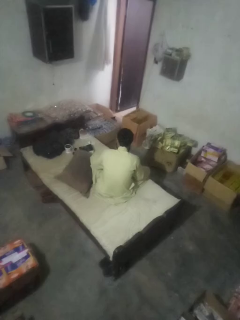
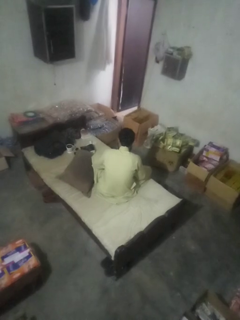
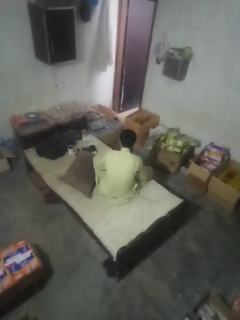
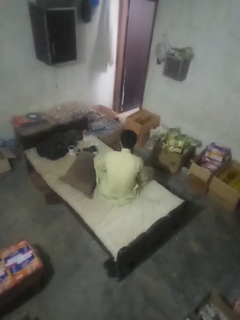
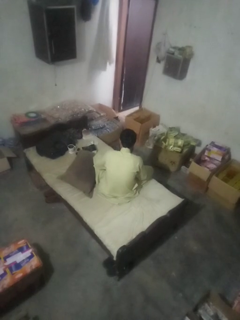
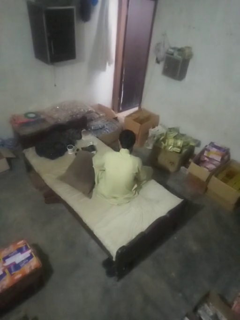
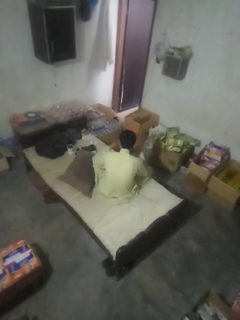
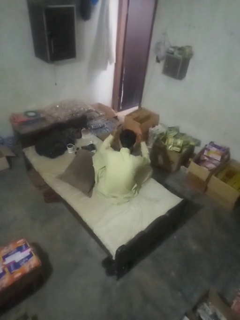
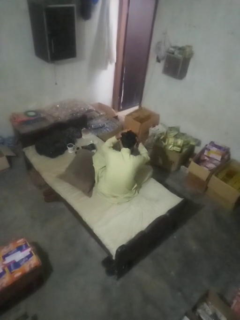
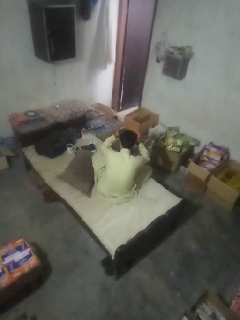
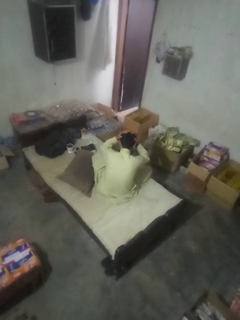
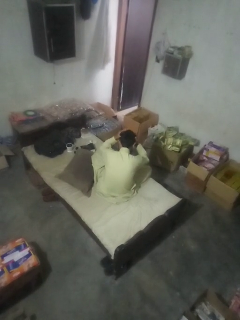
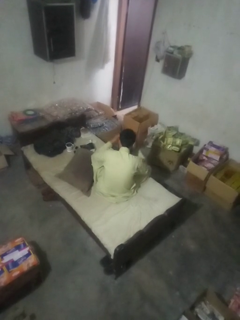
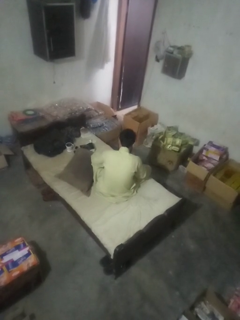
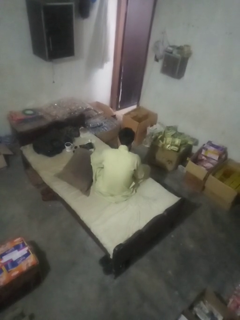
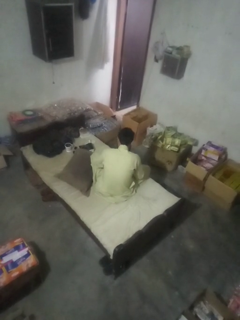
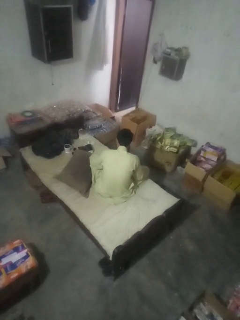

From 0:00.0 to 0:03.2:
person pats head

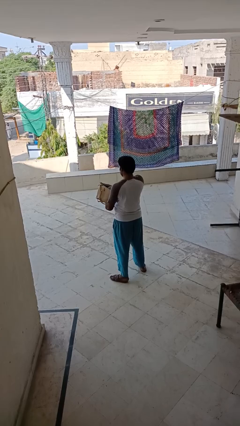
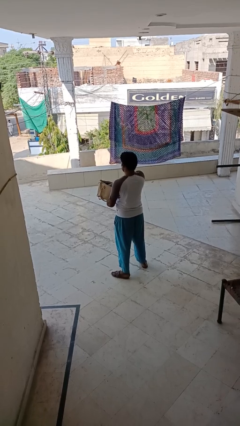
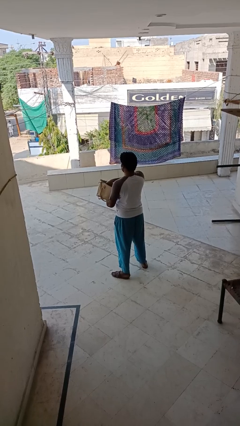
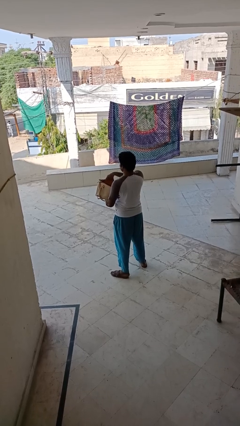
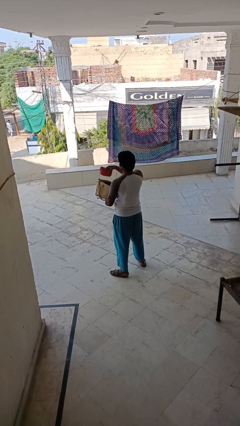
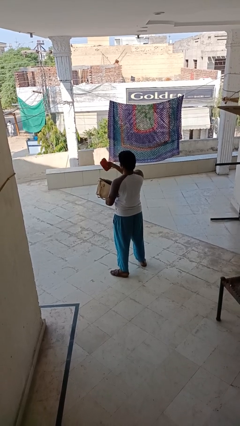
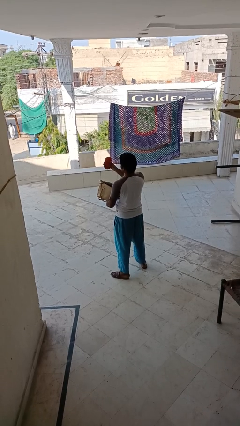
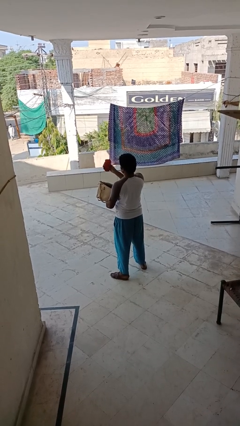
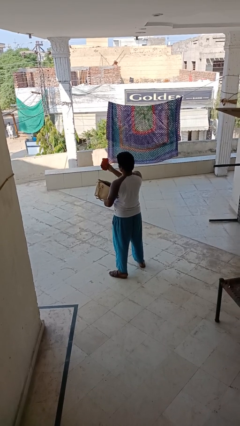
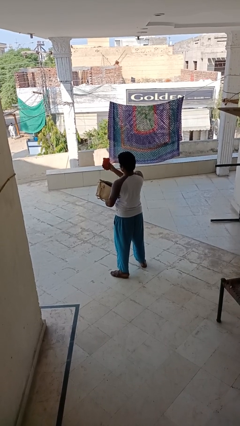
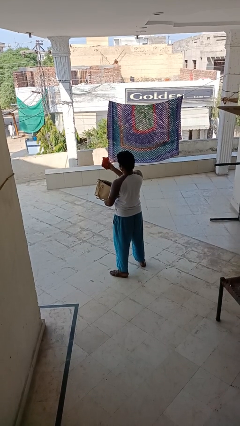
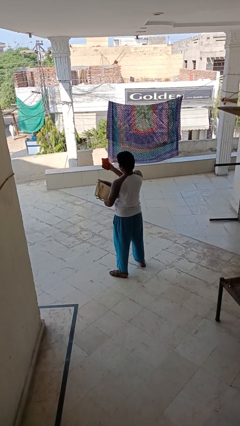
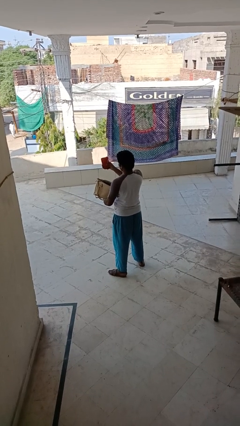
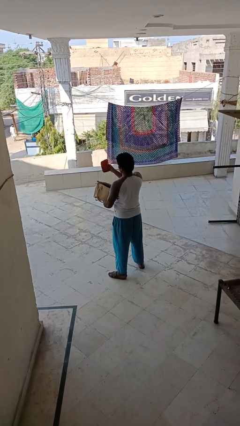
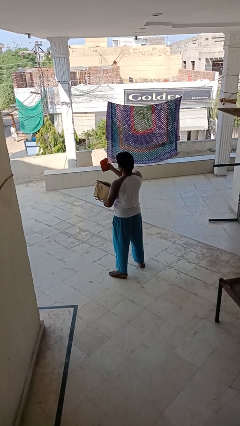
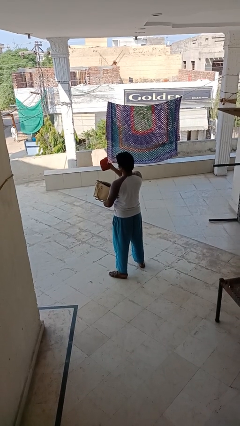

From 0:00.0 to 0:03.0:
person takes object from purse

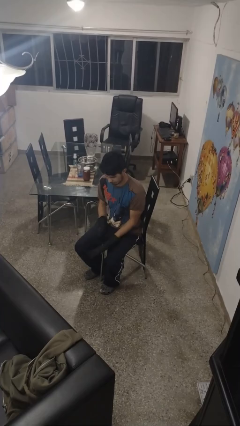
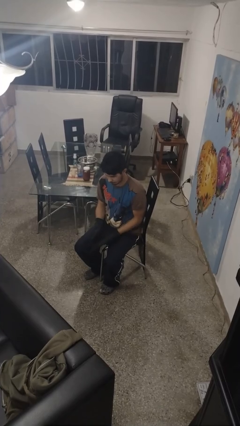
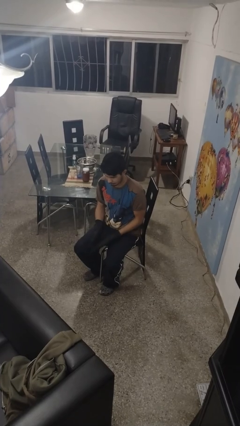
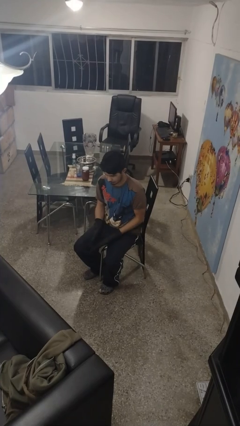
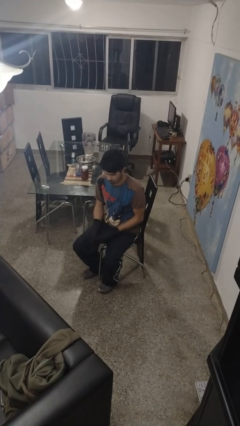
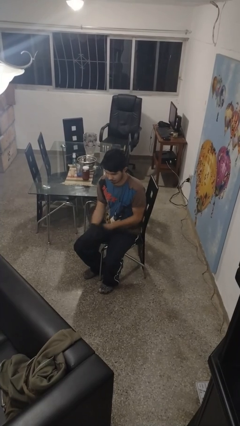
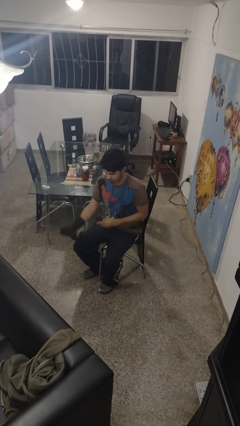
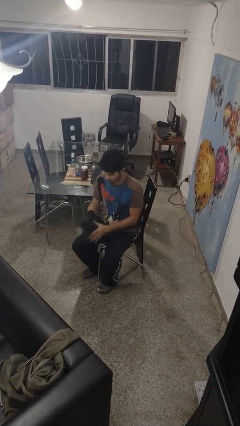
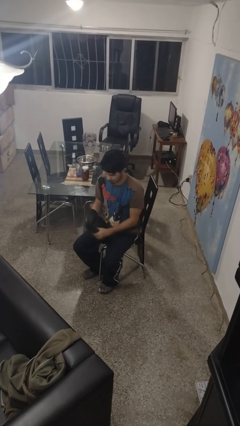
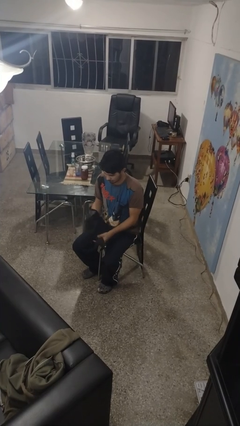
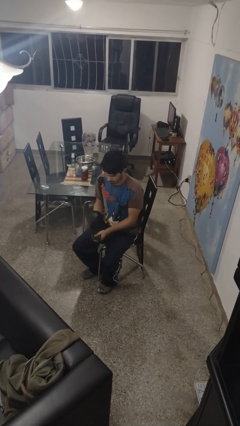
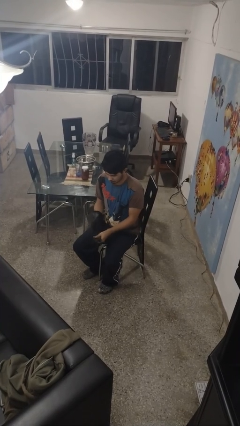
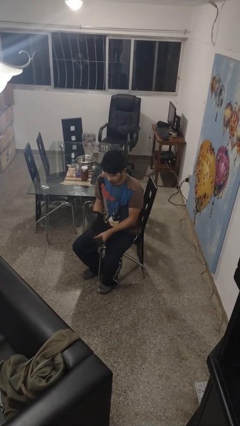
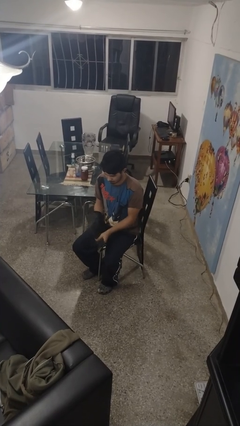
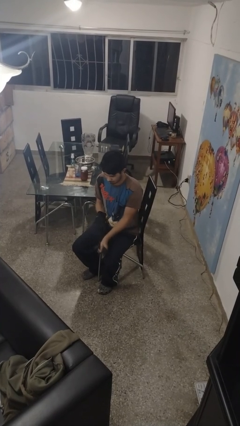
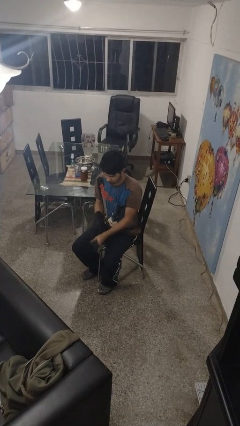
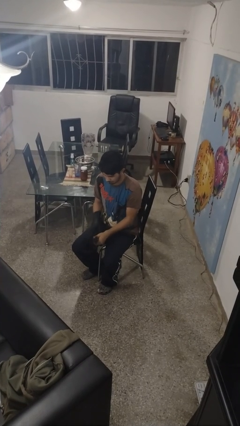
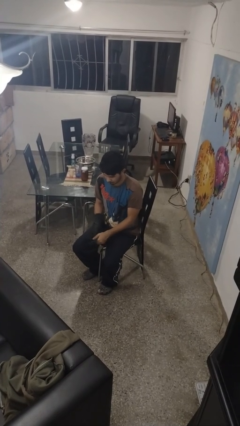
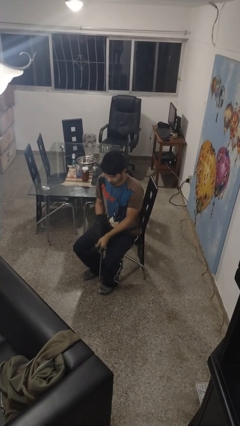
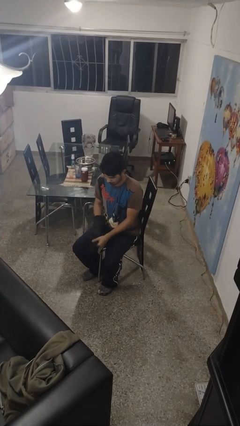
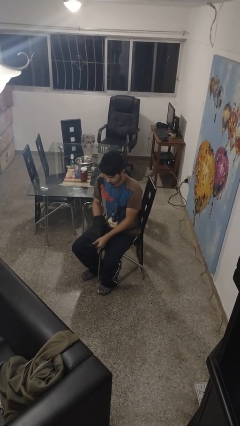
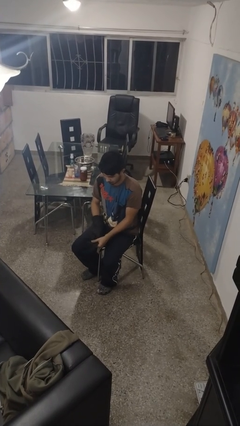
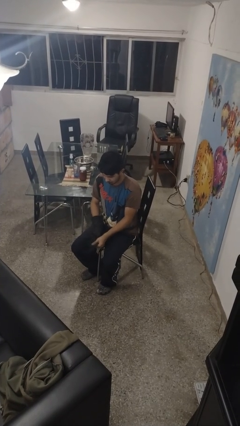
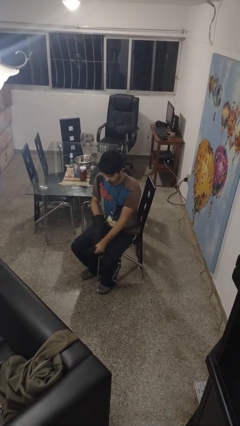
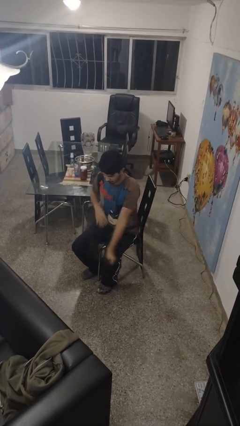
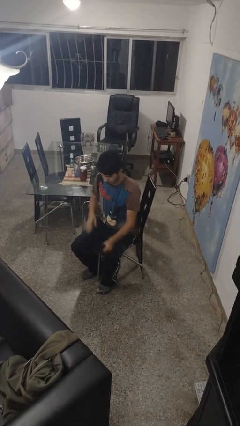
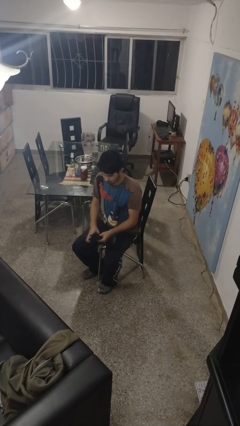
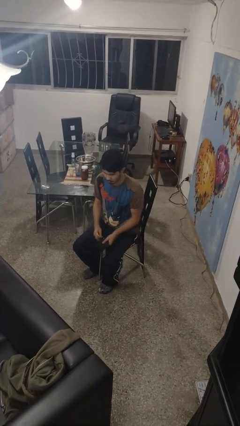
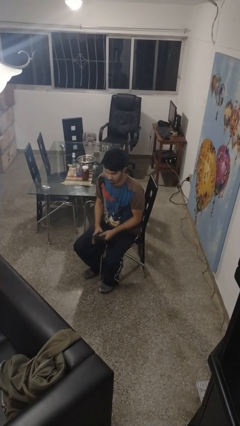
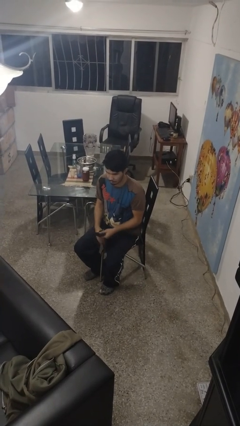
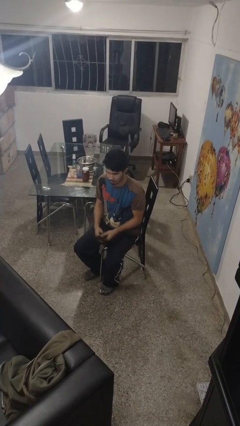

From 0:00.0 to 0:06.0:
person takes off gloves

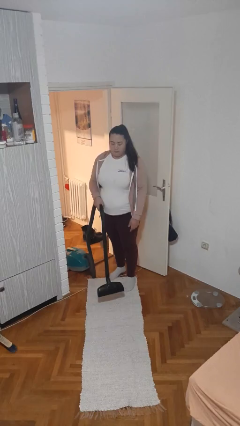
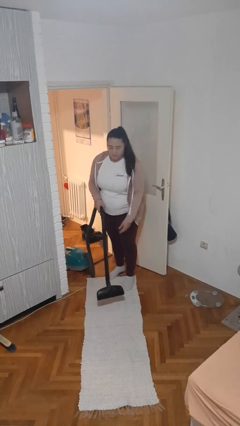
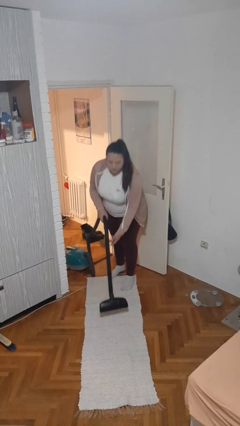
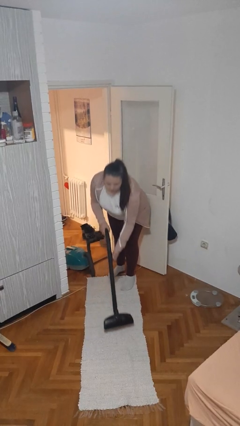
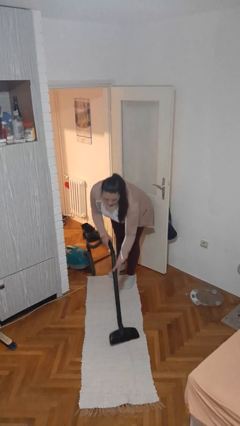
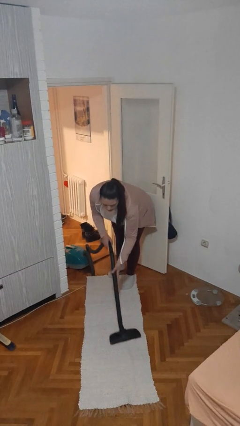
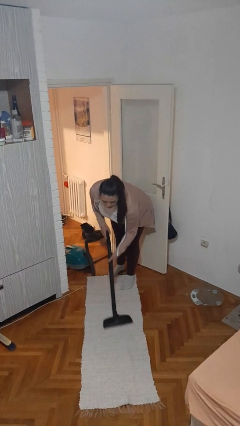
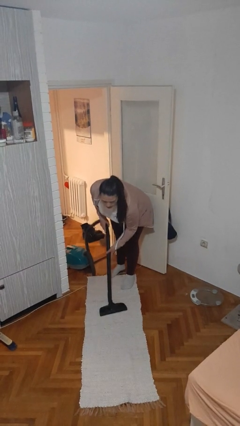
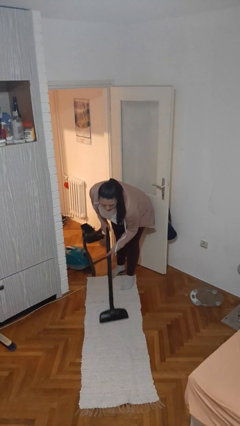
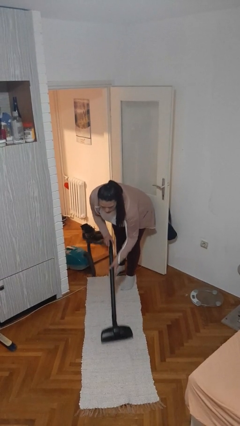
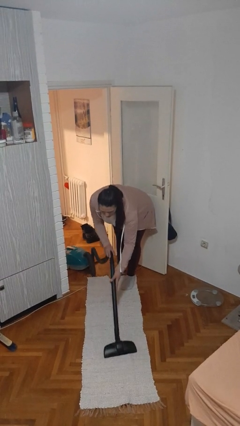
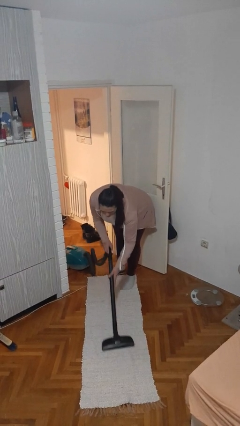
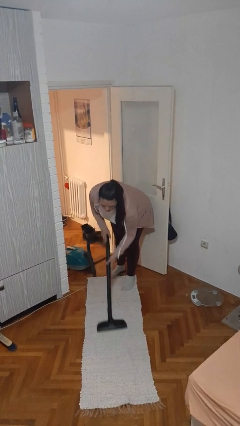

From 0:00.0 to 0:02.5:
person vacuums carpet

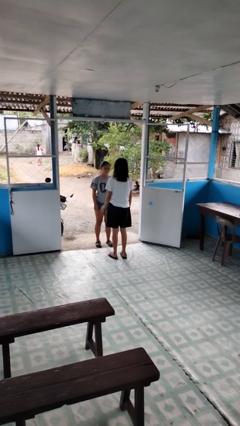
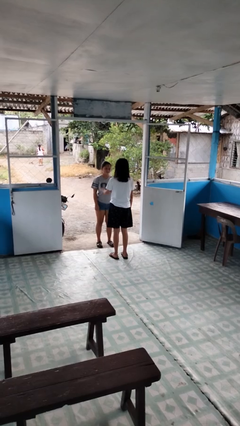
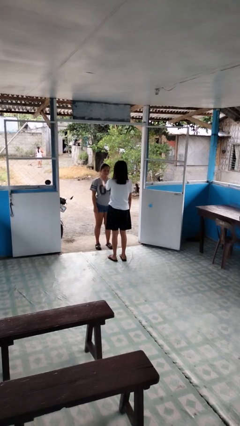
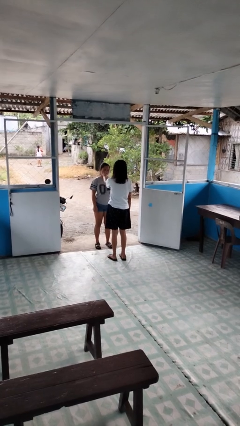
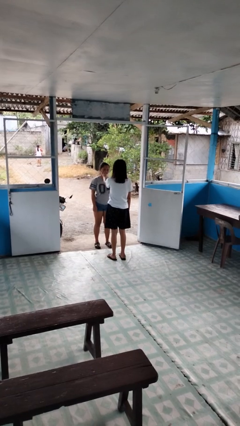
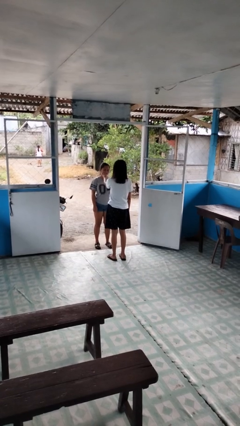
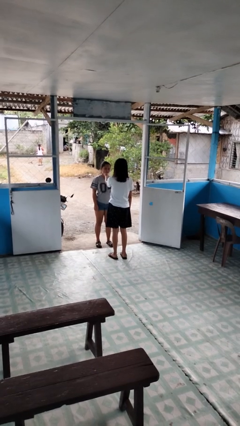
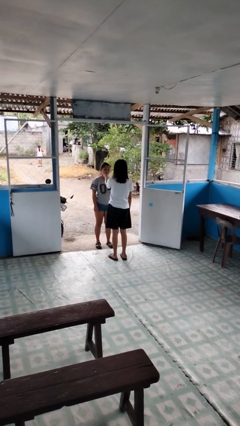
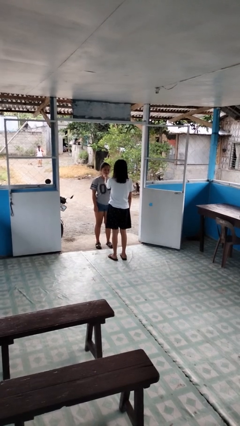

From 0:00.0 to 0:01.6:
person touches face of person

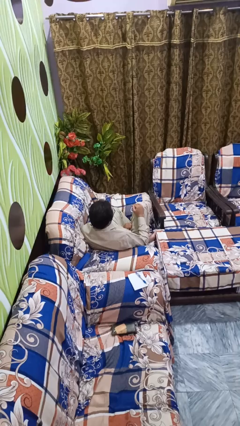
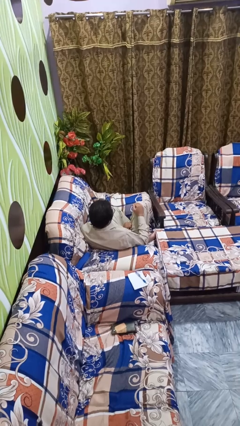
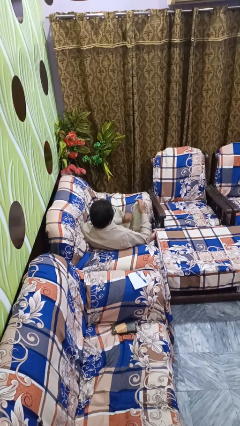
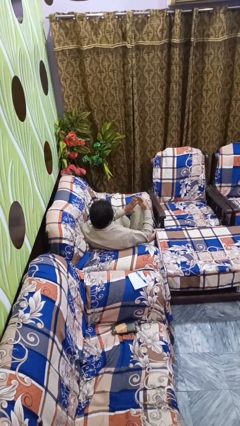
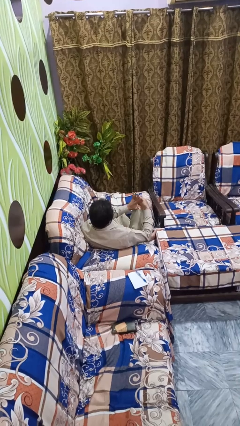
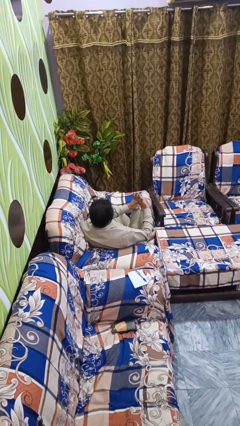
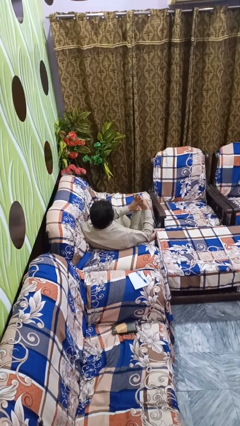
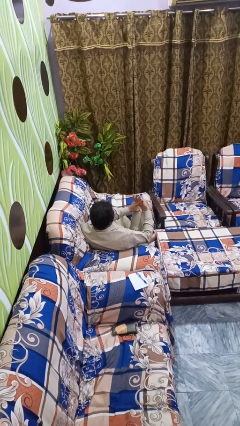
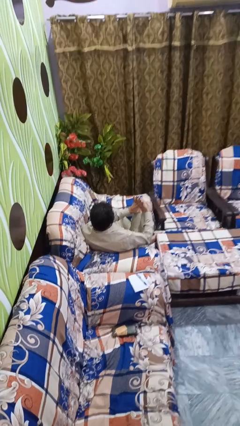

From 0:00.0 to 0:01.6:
person gestures number five
